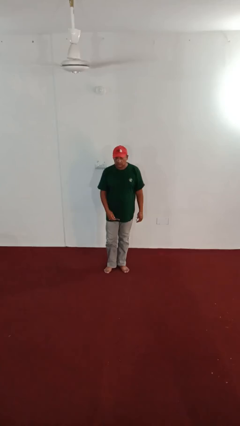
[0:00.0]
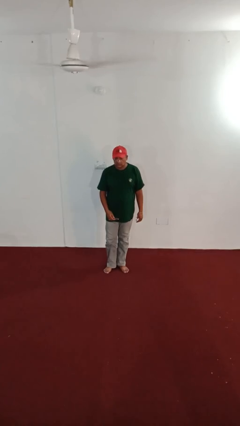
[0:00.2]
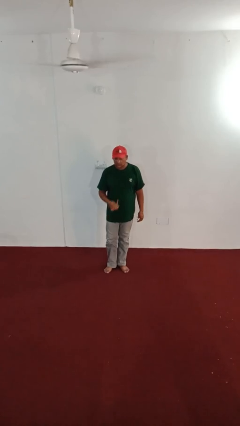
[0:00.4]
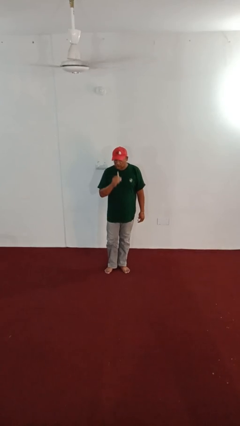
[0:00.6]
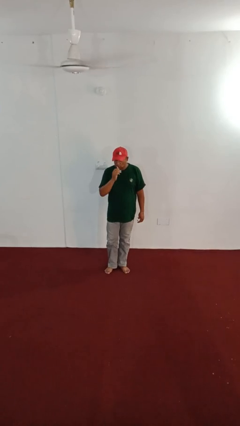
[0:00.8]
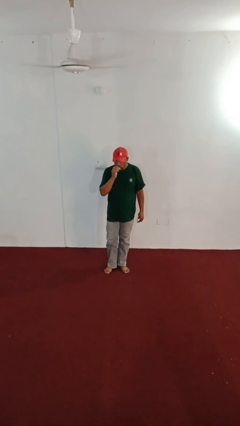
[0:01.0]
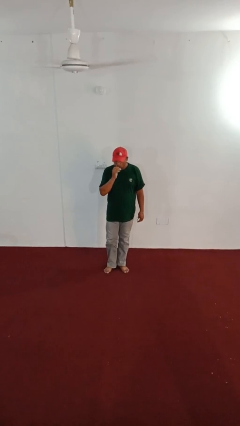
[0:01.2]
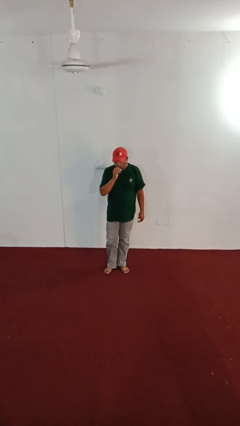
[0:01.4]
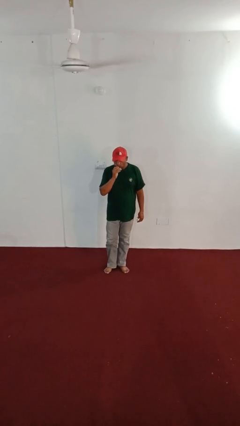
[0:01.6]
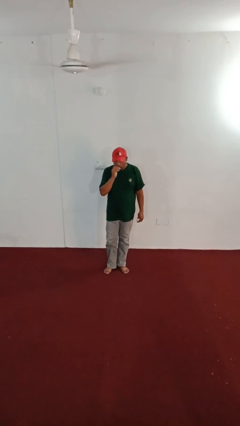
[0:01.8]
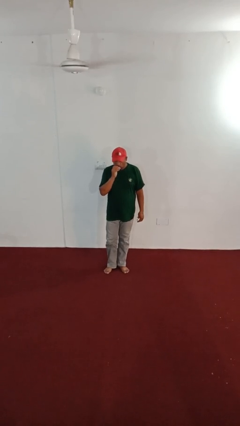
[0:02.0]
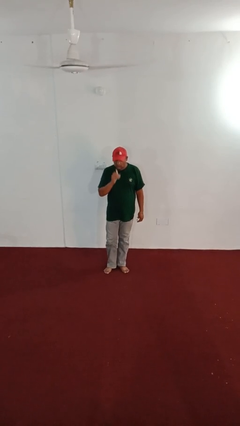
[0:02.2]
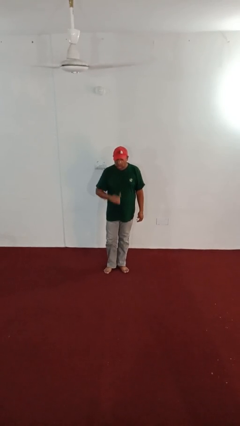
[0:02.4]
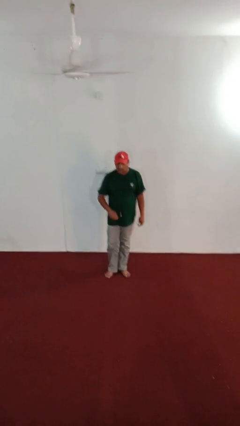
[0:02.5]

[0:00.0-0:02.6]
person brushes teeth

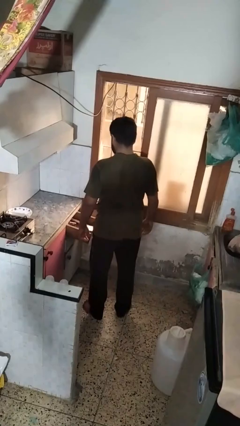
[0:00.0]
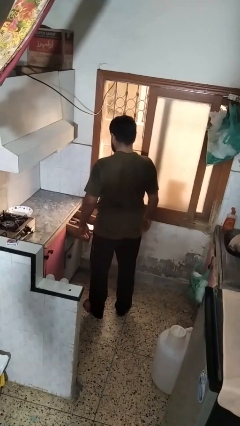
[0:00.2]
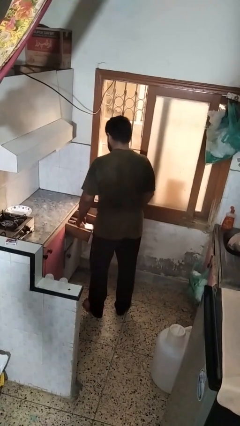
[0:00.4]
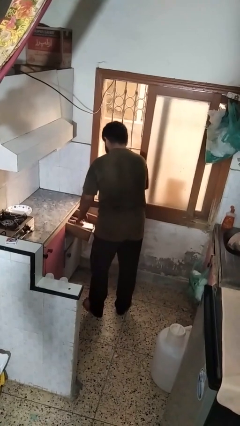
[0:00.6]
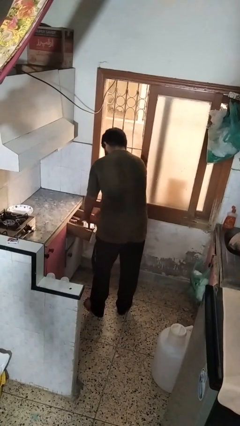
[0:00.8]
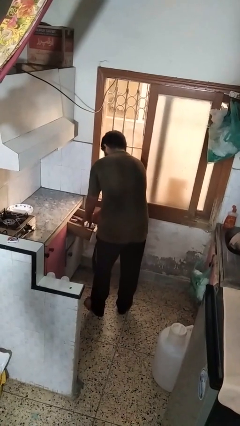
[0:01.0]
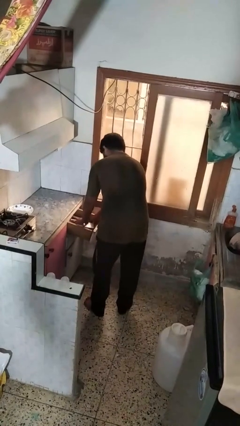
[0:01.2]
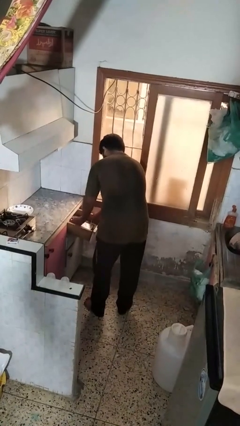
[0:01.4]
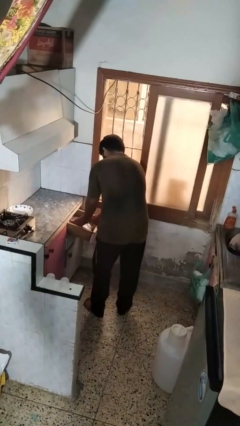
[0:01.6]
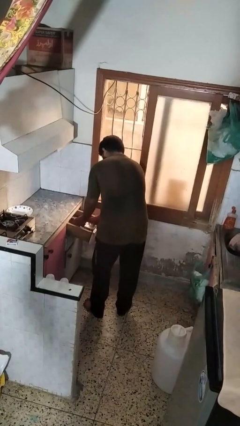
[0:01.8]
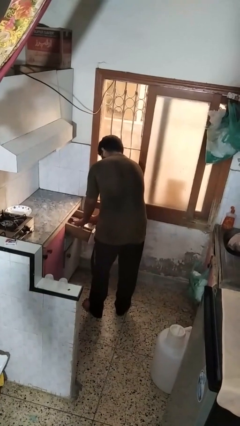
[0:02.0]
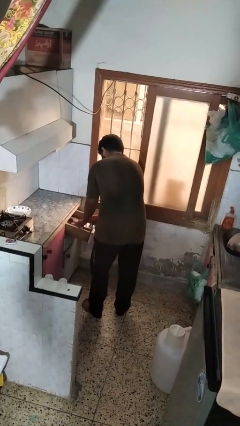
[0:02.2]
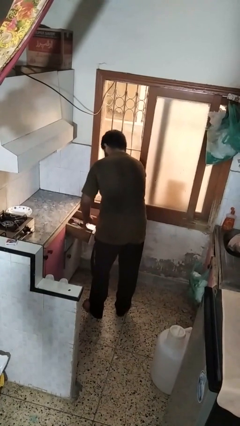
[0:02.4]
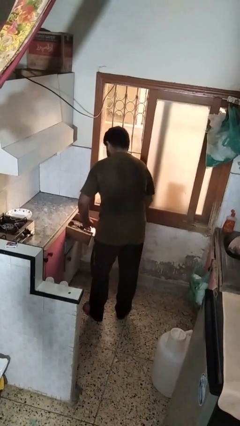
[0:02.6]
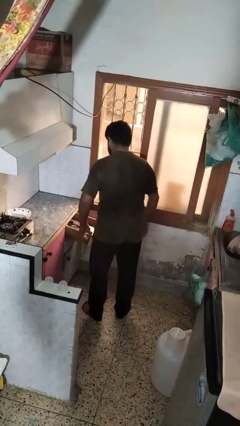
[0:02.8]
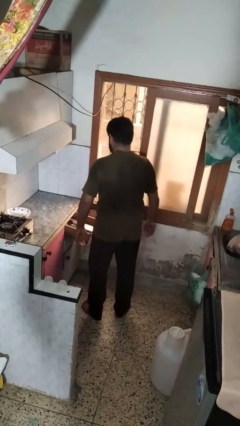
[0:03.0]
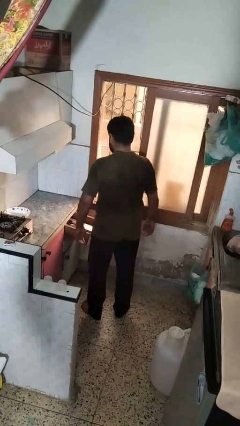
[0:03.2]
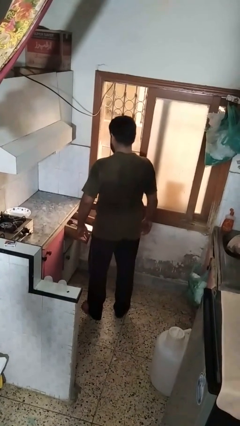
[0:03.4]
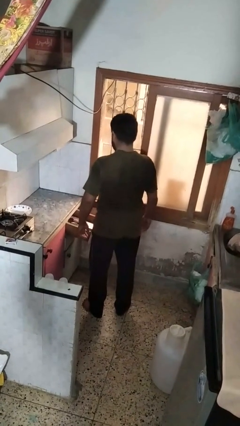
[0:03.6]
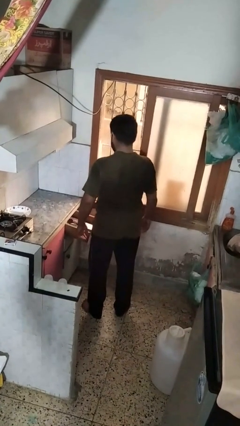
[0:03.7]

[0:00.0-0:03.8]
person searches in kitchen drawer

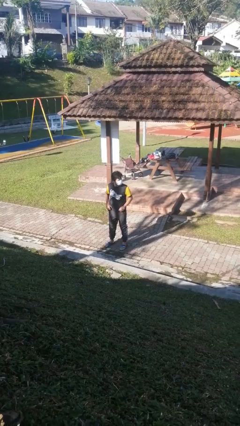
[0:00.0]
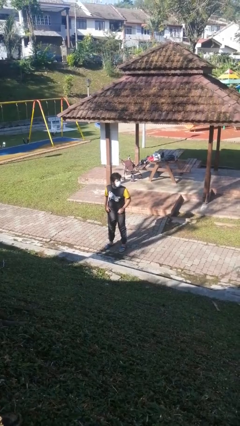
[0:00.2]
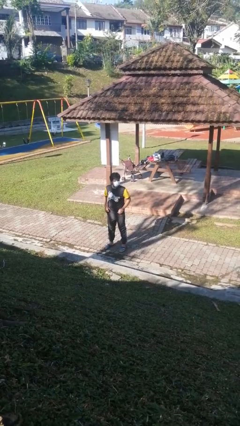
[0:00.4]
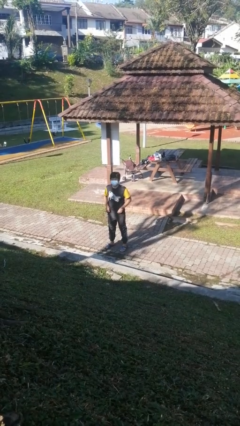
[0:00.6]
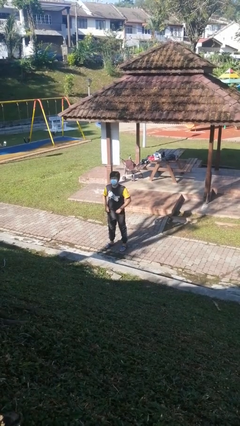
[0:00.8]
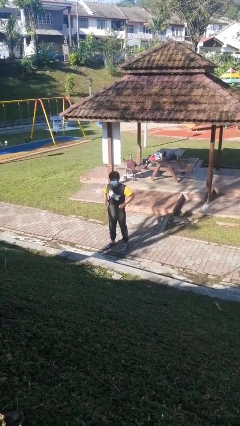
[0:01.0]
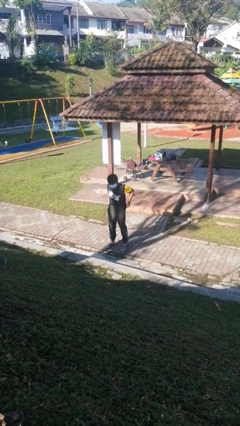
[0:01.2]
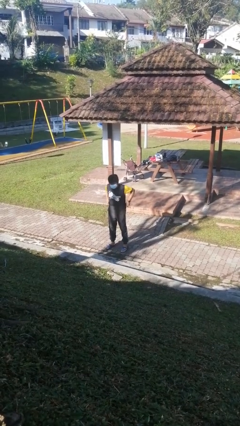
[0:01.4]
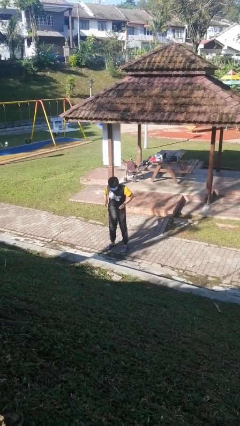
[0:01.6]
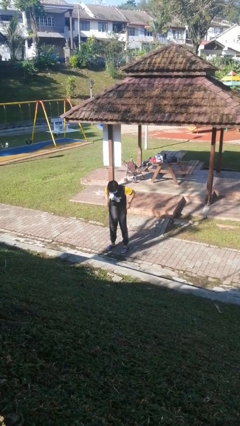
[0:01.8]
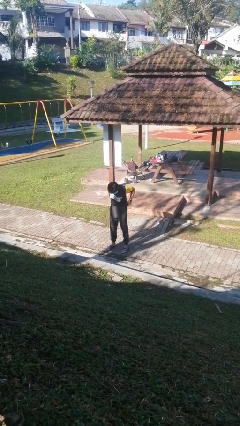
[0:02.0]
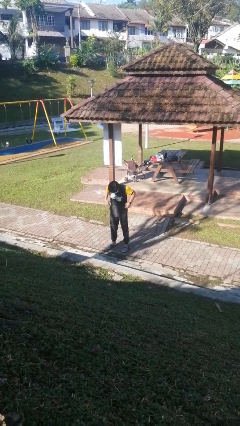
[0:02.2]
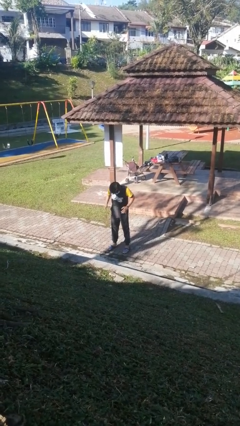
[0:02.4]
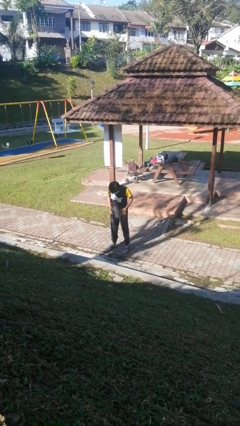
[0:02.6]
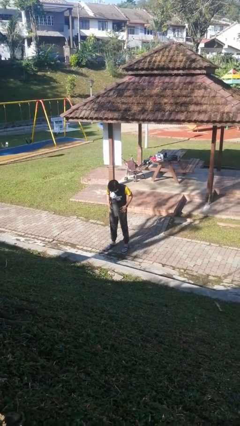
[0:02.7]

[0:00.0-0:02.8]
person hikes up pants

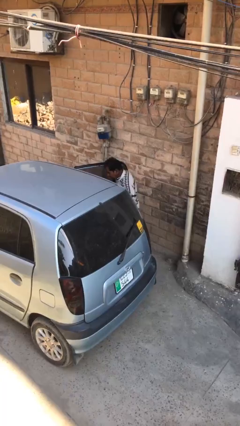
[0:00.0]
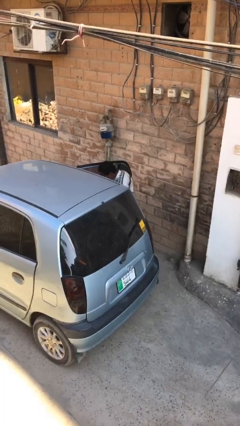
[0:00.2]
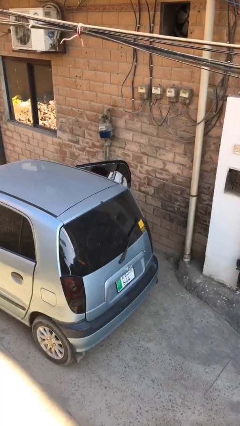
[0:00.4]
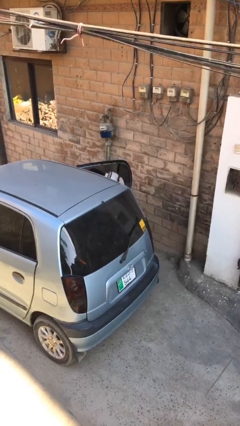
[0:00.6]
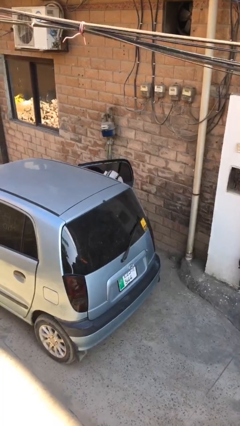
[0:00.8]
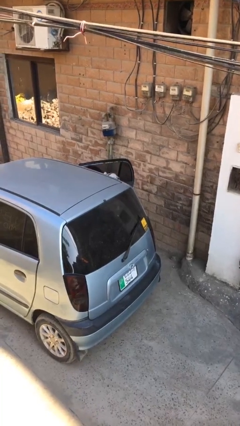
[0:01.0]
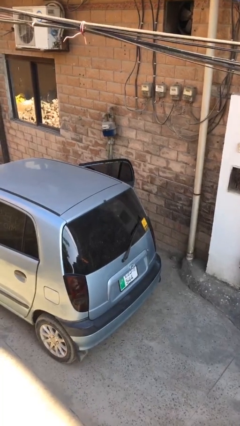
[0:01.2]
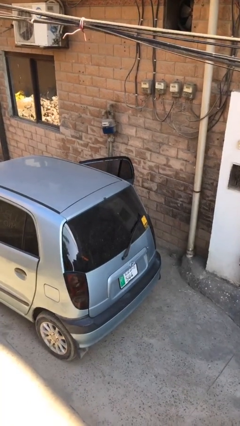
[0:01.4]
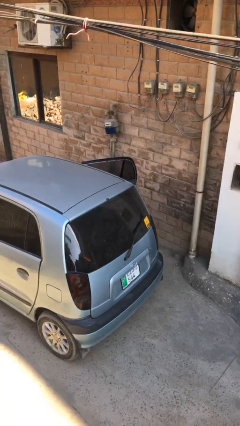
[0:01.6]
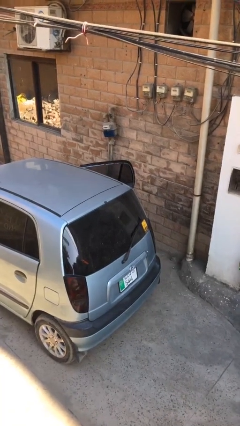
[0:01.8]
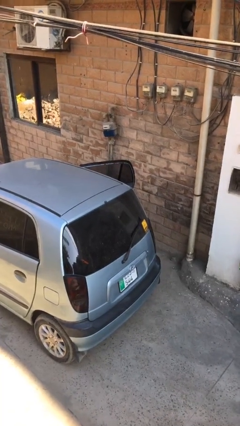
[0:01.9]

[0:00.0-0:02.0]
person enters car

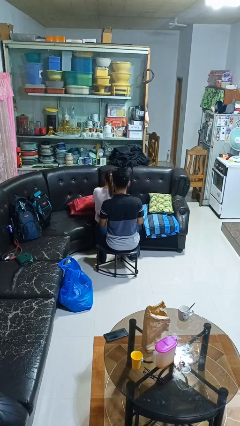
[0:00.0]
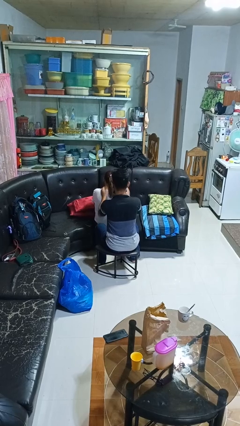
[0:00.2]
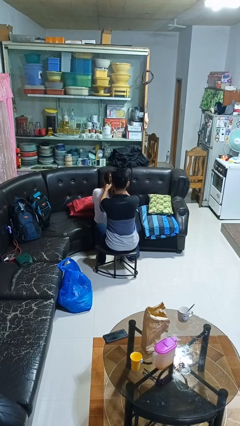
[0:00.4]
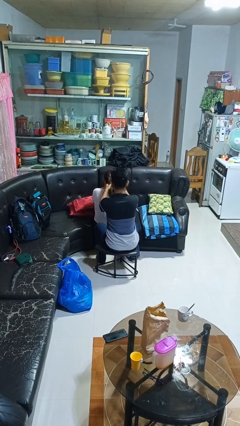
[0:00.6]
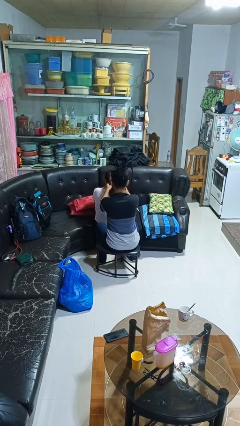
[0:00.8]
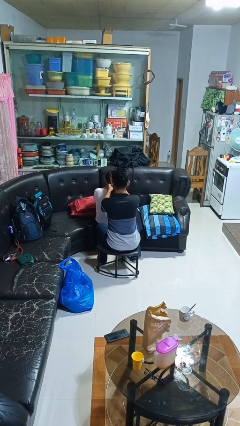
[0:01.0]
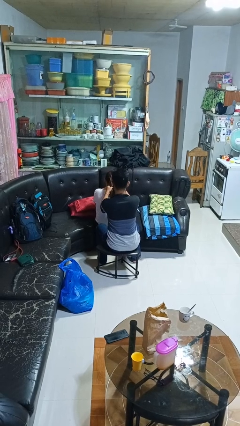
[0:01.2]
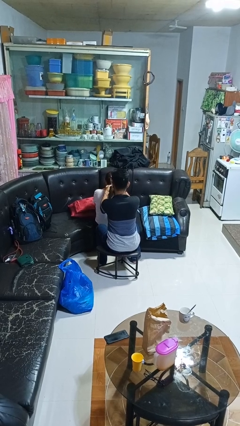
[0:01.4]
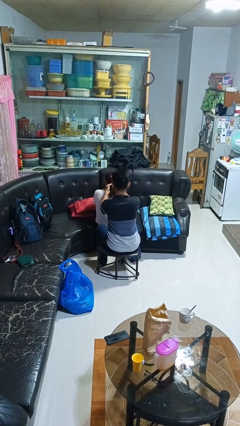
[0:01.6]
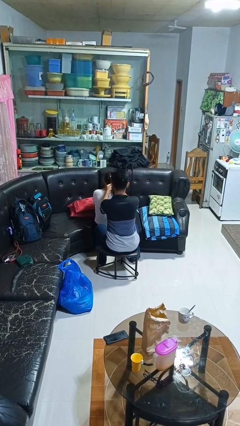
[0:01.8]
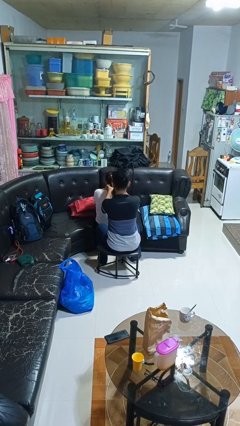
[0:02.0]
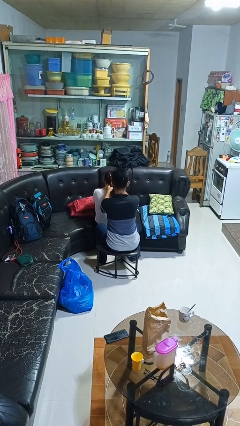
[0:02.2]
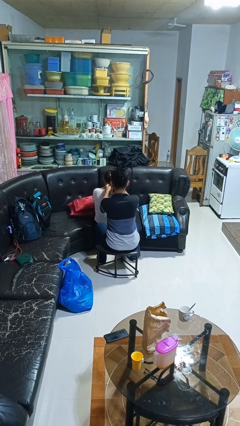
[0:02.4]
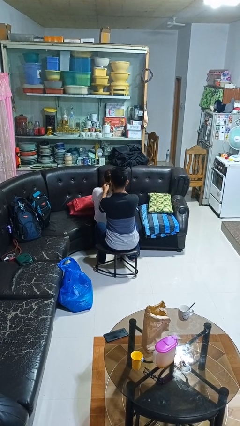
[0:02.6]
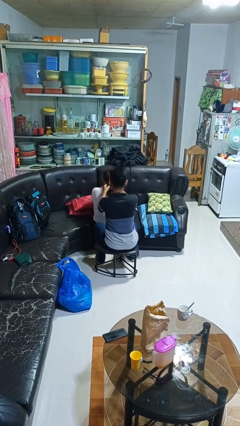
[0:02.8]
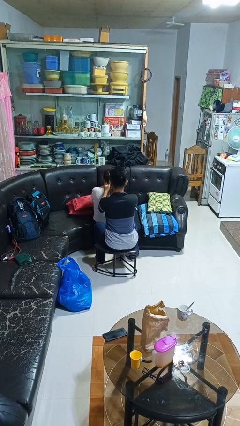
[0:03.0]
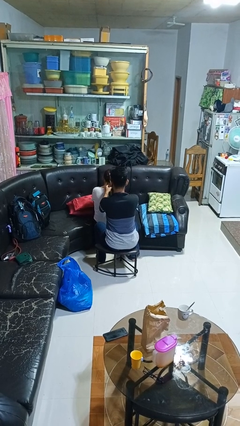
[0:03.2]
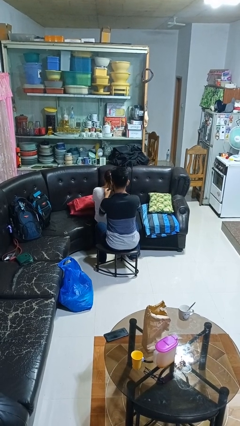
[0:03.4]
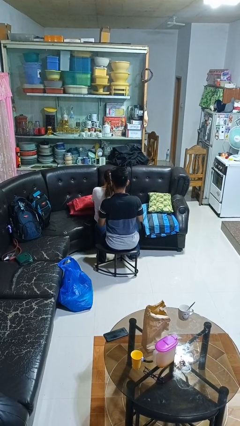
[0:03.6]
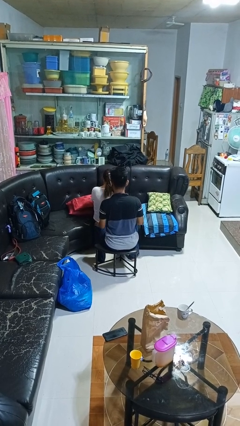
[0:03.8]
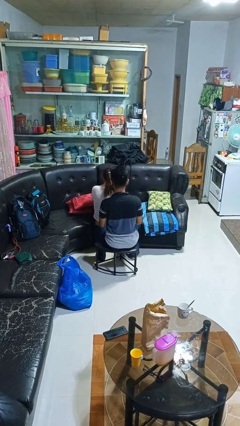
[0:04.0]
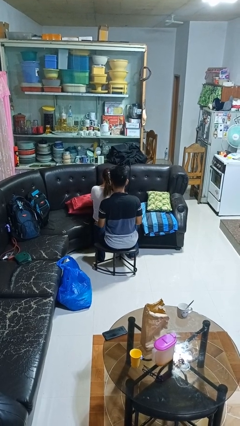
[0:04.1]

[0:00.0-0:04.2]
person braids hair of person

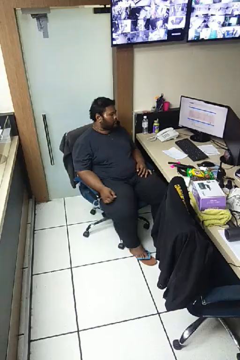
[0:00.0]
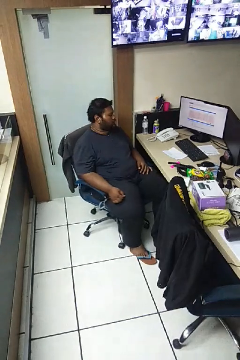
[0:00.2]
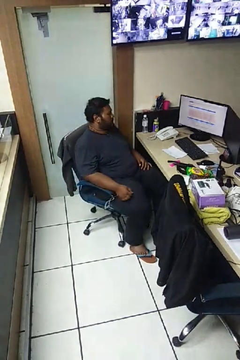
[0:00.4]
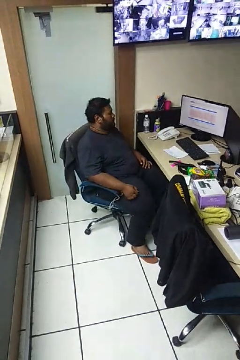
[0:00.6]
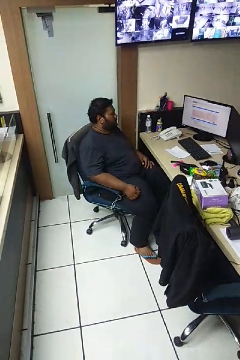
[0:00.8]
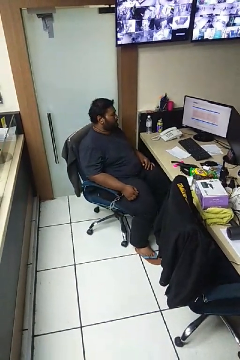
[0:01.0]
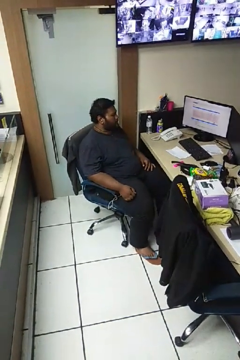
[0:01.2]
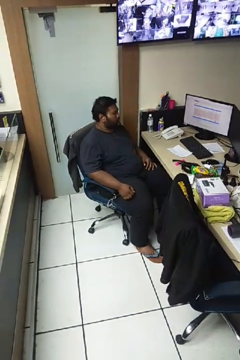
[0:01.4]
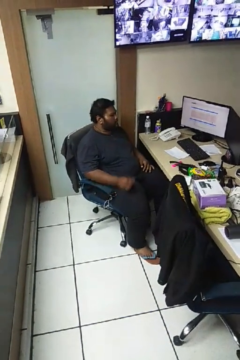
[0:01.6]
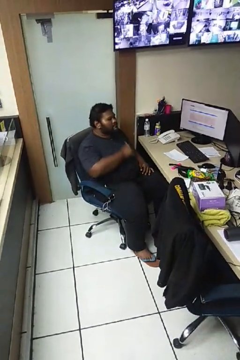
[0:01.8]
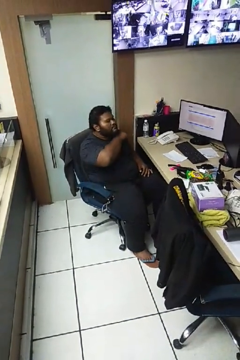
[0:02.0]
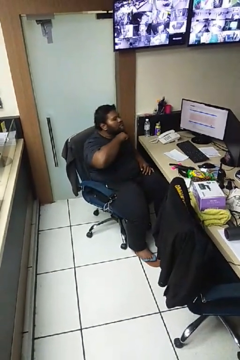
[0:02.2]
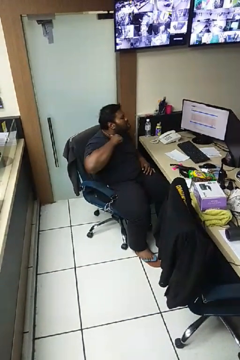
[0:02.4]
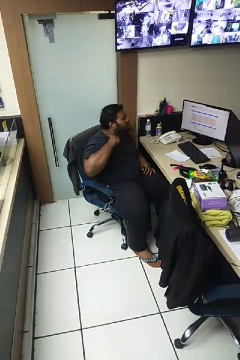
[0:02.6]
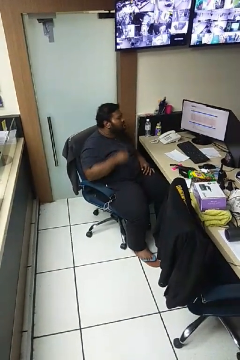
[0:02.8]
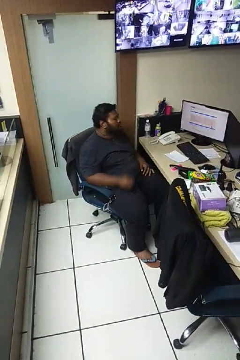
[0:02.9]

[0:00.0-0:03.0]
person gestures cut
